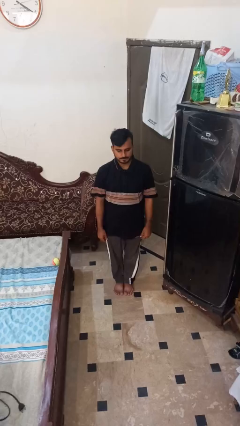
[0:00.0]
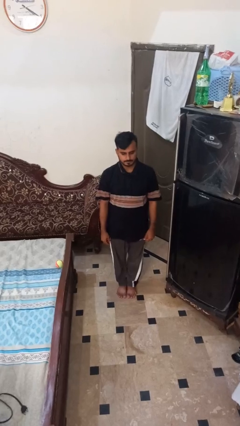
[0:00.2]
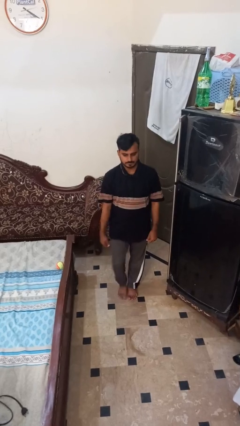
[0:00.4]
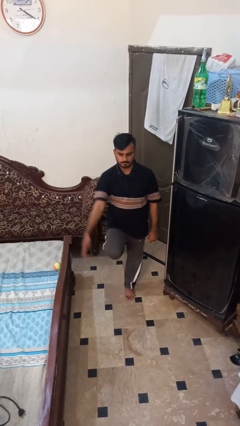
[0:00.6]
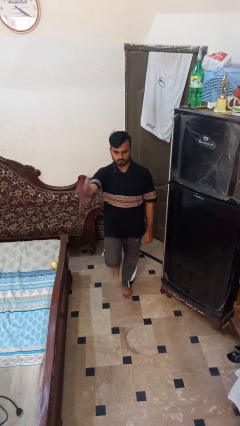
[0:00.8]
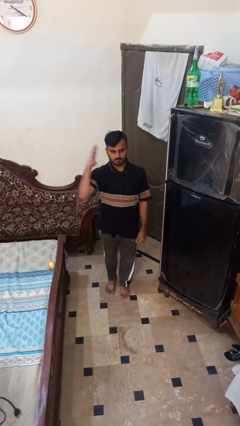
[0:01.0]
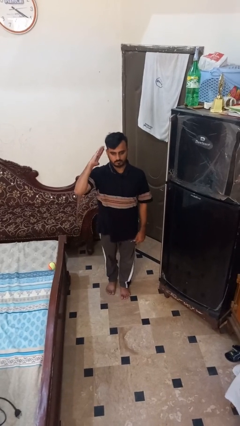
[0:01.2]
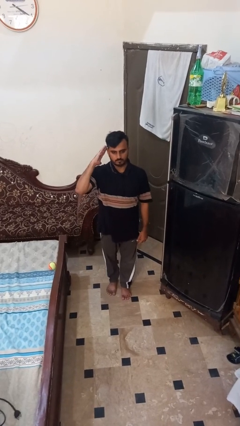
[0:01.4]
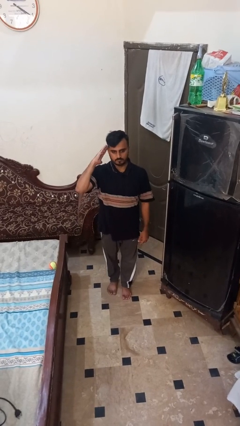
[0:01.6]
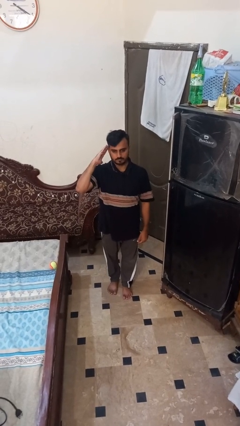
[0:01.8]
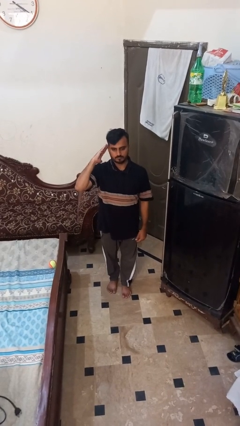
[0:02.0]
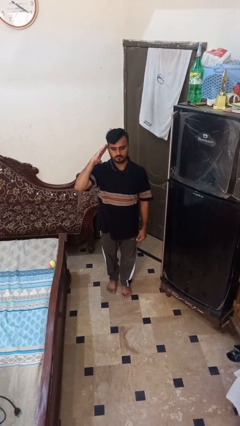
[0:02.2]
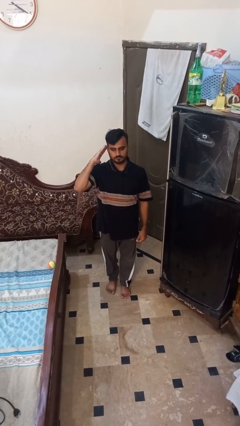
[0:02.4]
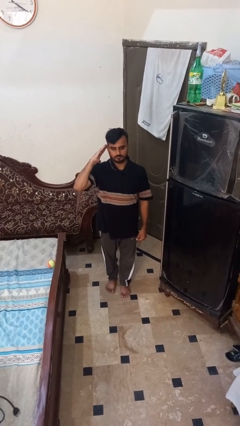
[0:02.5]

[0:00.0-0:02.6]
person salutes

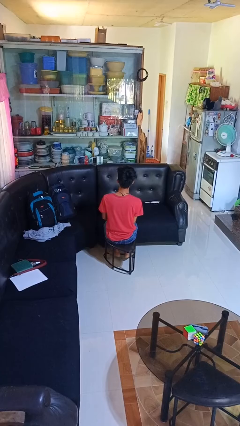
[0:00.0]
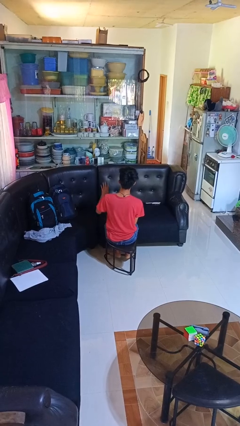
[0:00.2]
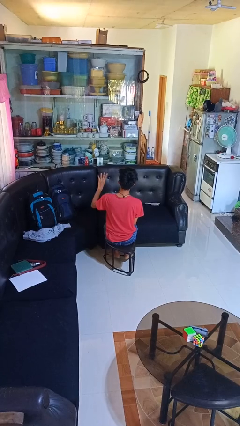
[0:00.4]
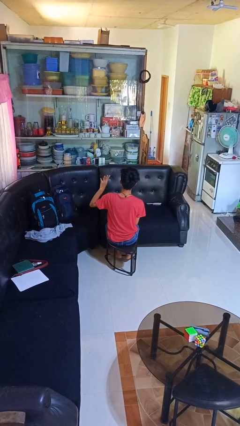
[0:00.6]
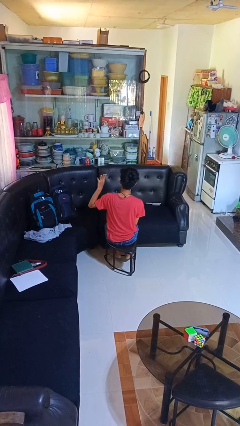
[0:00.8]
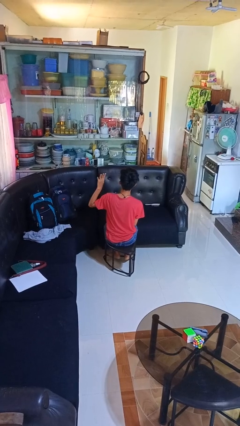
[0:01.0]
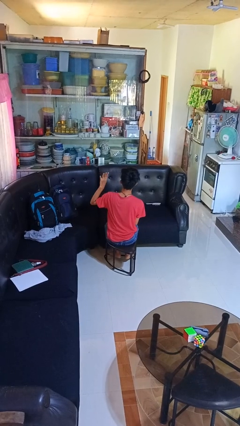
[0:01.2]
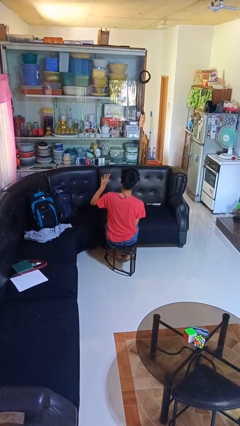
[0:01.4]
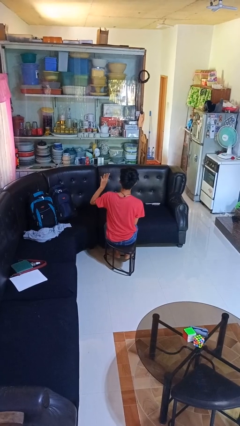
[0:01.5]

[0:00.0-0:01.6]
person gestures number four

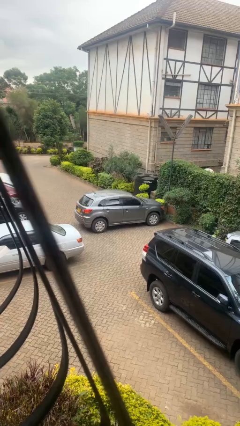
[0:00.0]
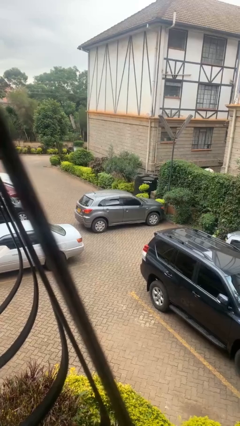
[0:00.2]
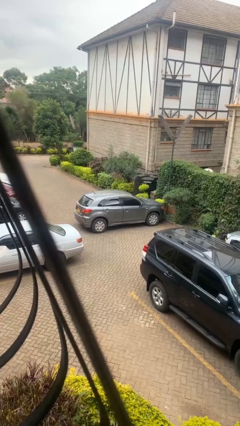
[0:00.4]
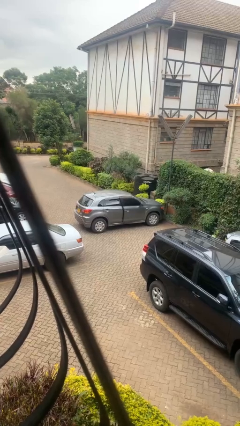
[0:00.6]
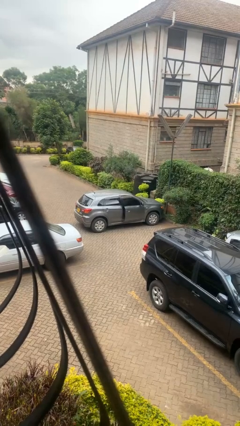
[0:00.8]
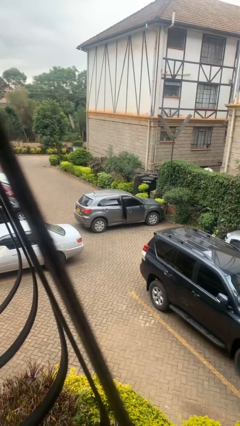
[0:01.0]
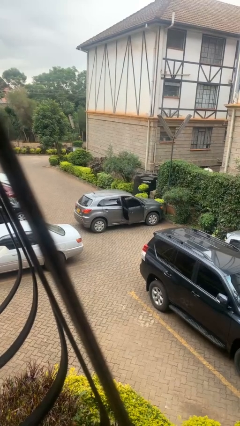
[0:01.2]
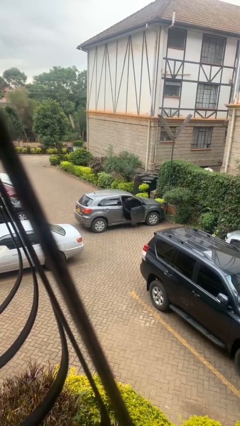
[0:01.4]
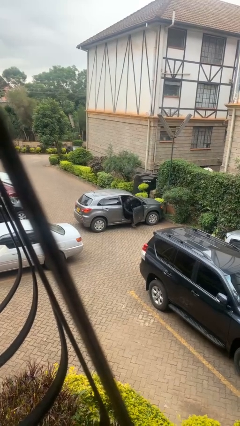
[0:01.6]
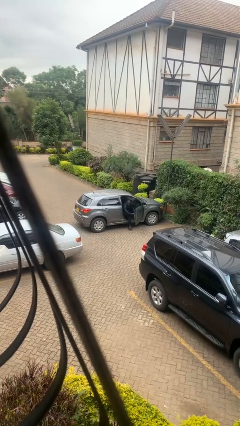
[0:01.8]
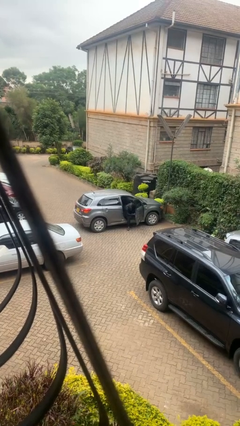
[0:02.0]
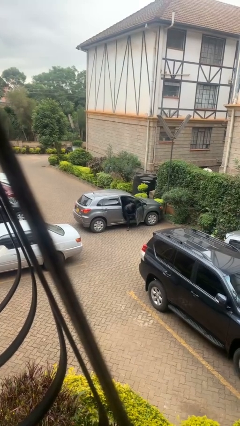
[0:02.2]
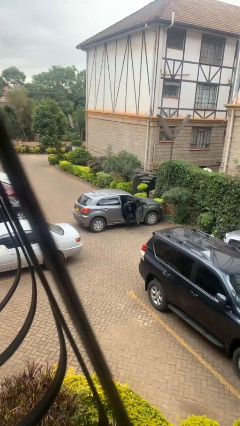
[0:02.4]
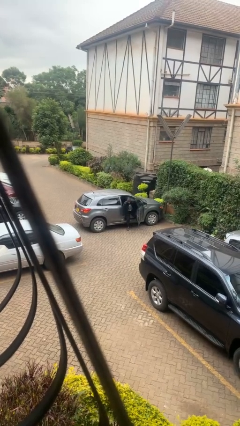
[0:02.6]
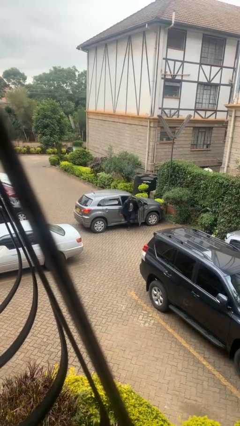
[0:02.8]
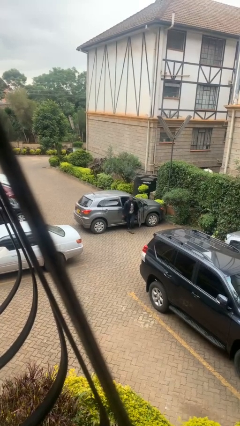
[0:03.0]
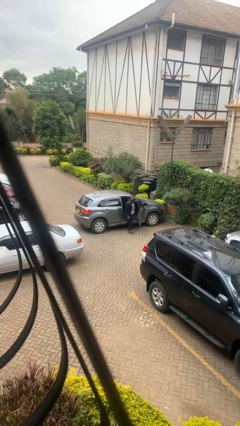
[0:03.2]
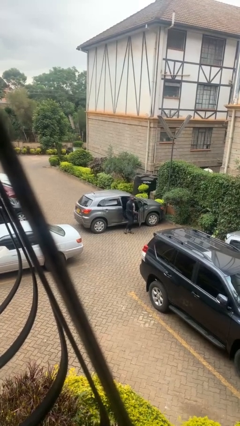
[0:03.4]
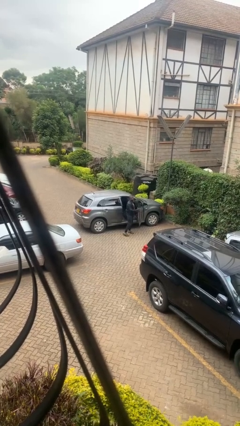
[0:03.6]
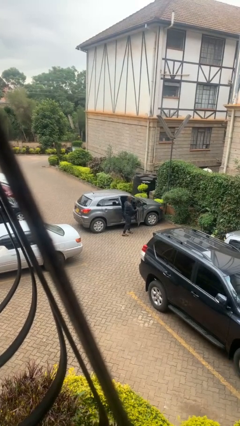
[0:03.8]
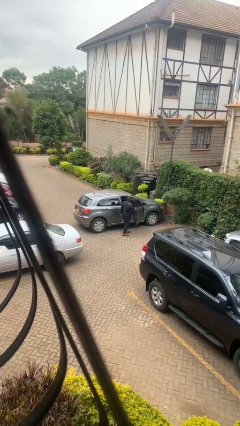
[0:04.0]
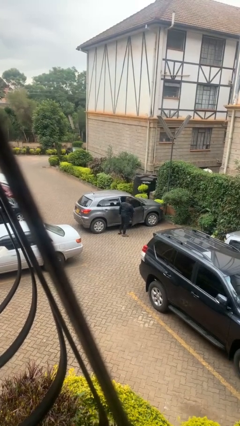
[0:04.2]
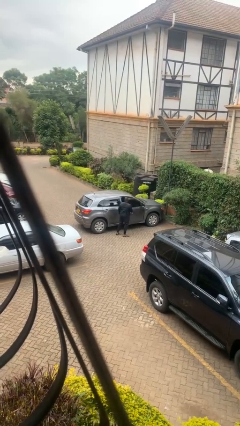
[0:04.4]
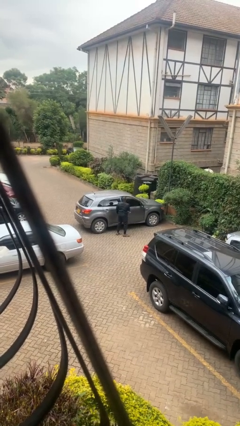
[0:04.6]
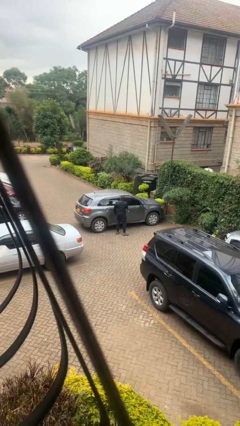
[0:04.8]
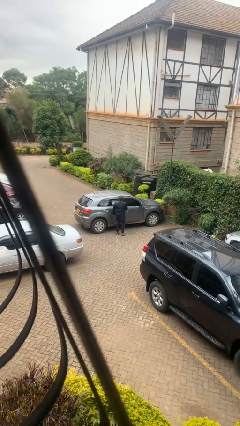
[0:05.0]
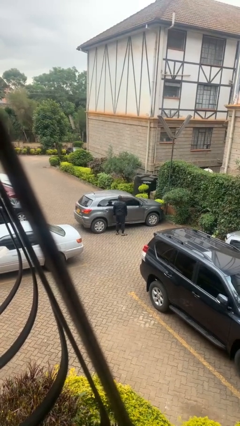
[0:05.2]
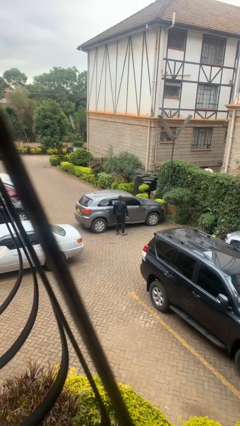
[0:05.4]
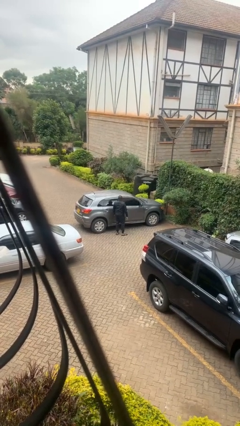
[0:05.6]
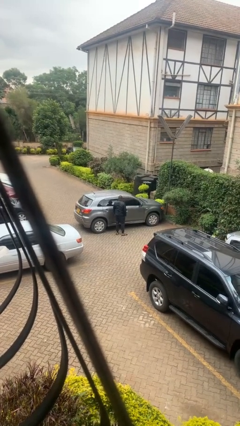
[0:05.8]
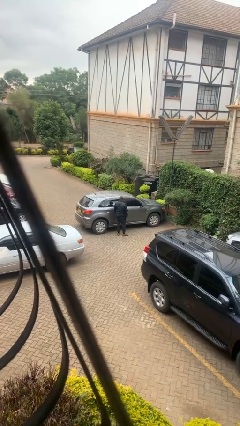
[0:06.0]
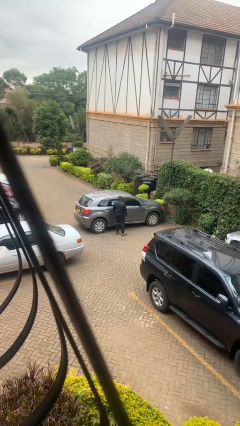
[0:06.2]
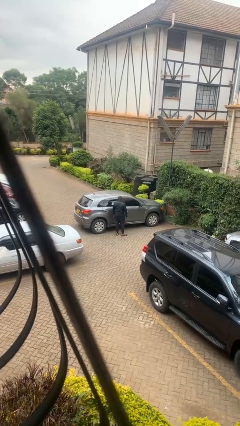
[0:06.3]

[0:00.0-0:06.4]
car drops off person

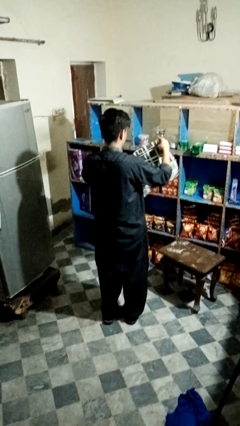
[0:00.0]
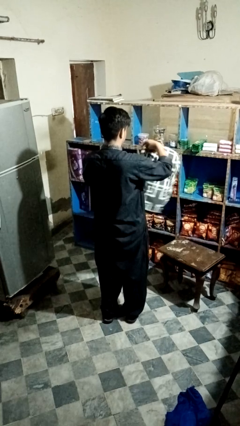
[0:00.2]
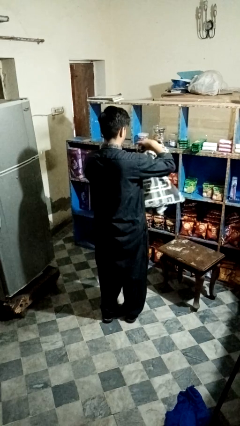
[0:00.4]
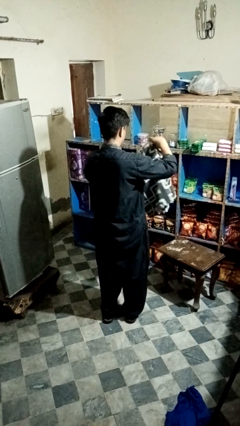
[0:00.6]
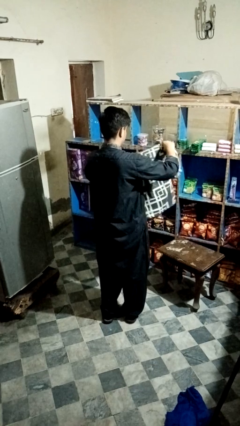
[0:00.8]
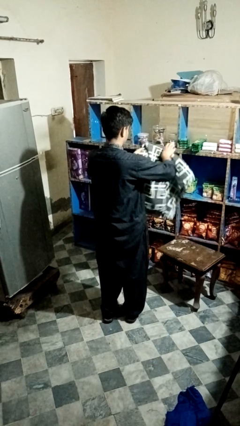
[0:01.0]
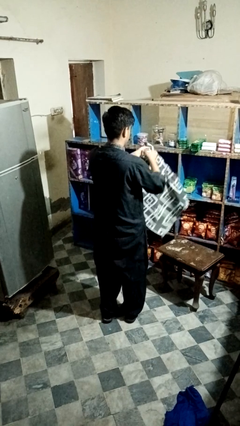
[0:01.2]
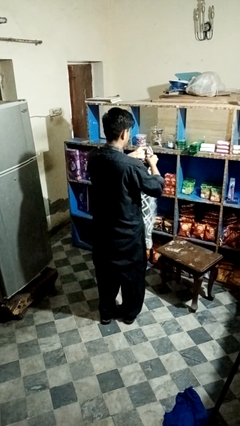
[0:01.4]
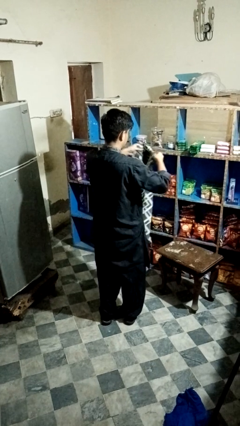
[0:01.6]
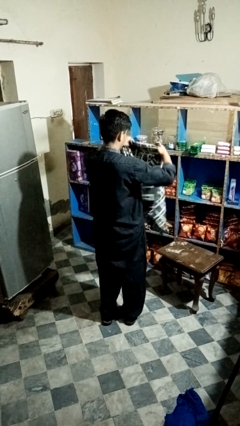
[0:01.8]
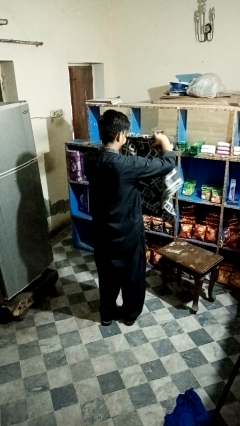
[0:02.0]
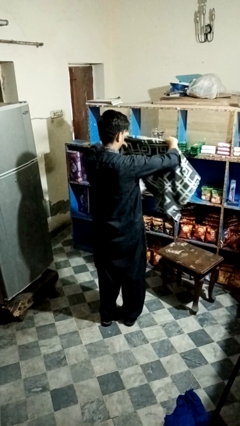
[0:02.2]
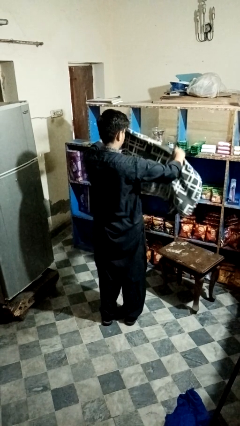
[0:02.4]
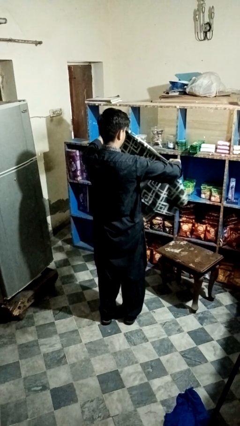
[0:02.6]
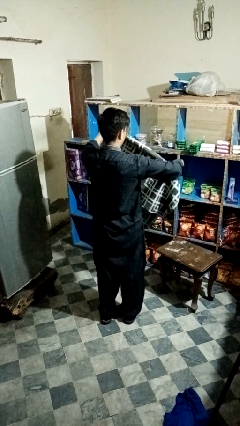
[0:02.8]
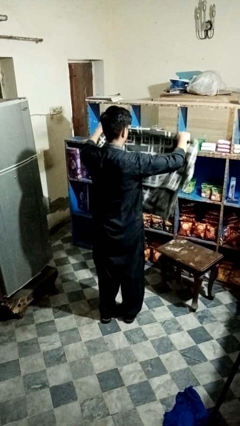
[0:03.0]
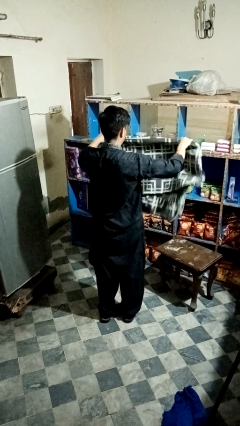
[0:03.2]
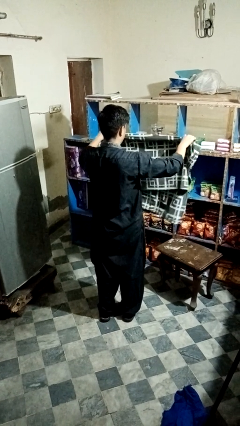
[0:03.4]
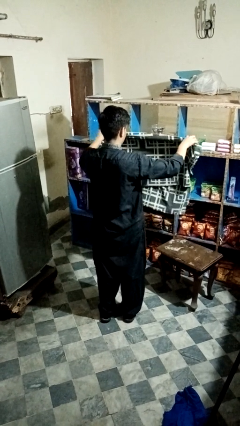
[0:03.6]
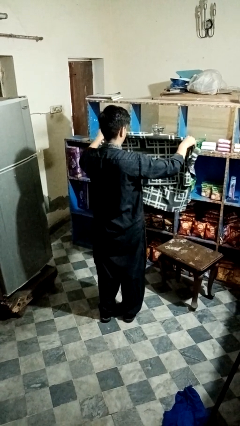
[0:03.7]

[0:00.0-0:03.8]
person unfolds blanket

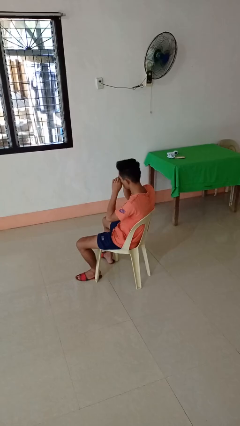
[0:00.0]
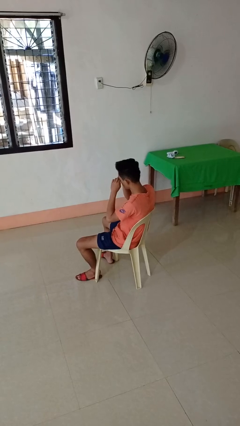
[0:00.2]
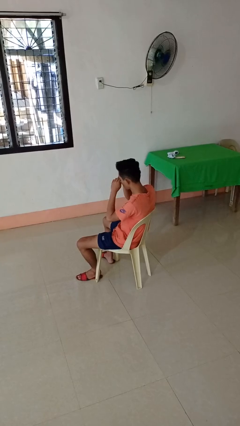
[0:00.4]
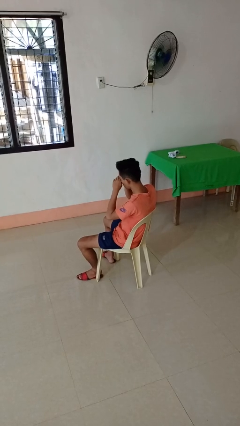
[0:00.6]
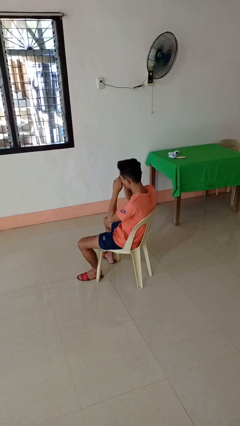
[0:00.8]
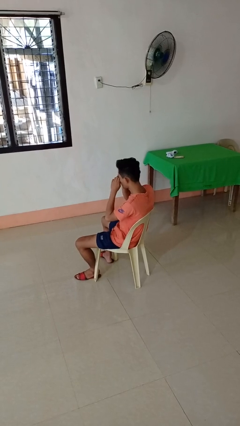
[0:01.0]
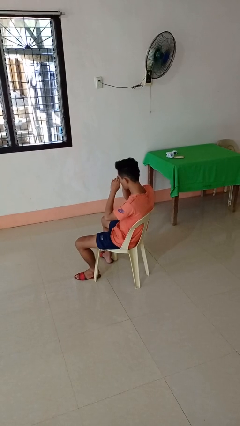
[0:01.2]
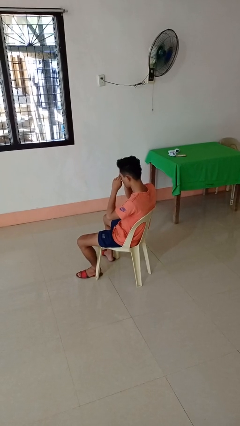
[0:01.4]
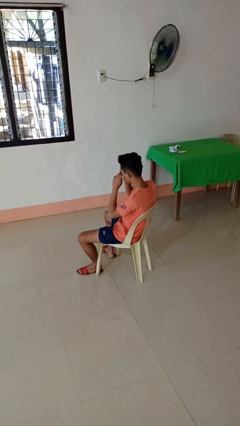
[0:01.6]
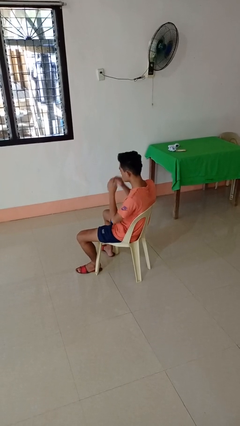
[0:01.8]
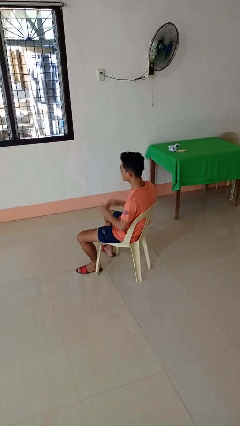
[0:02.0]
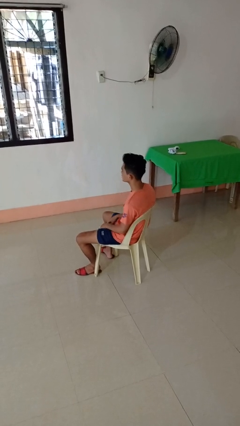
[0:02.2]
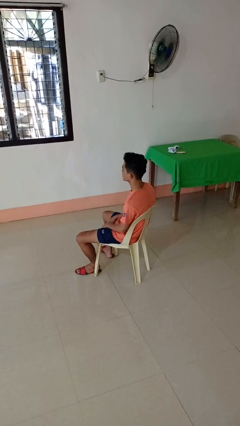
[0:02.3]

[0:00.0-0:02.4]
person rubs eyes

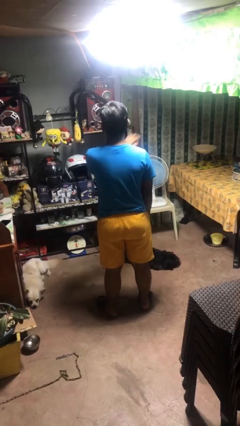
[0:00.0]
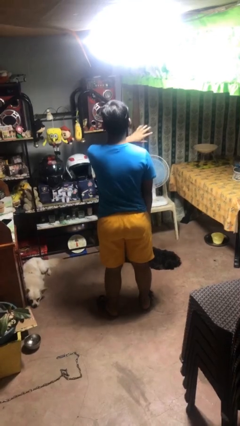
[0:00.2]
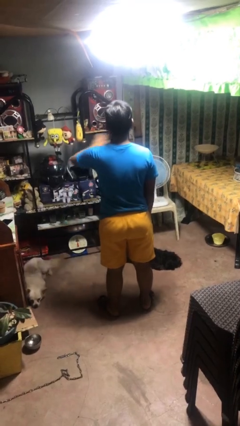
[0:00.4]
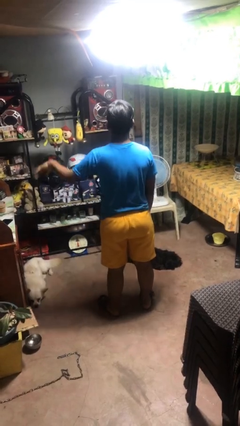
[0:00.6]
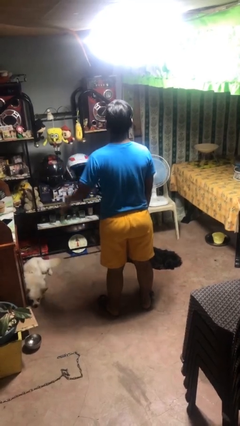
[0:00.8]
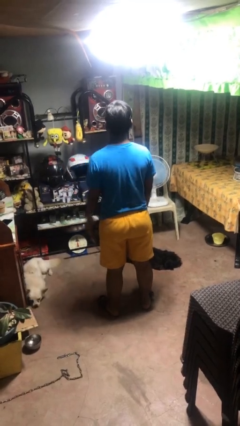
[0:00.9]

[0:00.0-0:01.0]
person gestures swipe left

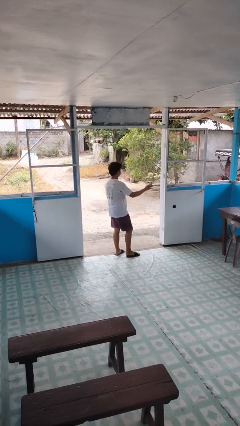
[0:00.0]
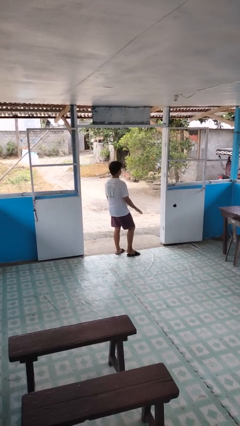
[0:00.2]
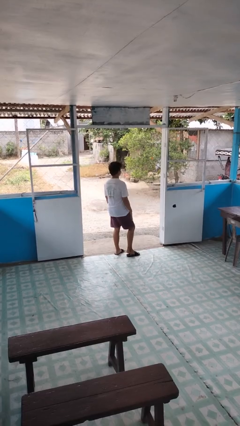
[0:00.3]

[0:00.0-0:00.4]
person slaps hands on thighs
